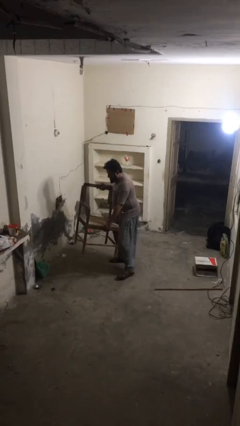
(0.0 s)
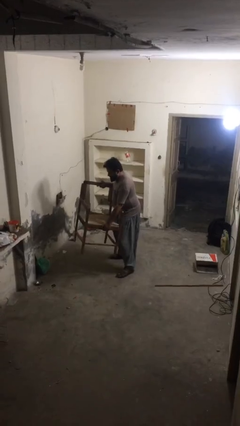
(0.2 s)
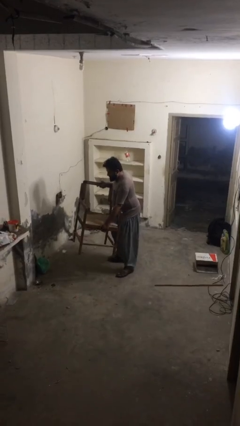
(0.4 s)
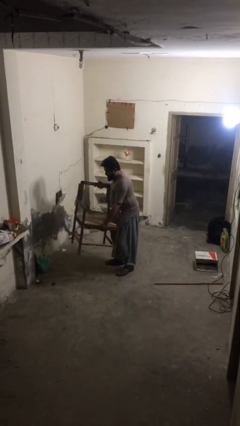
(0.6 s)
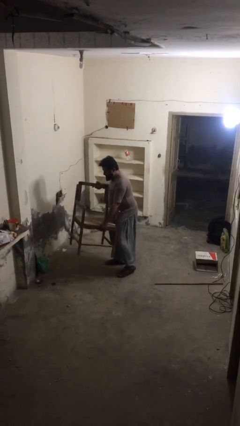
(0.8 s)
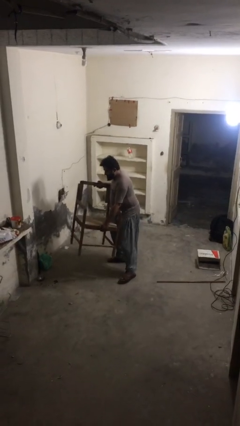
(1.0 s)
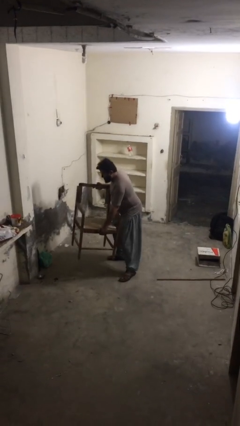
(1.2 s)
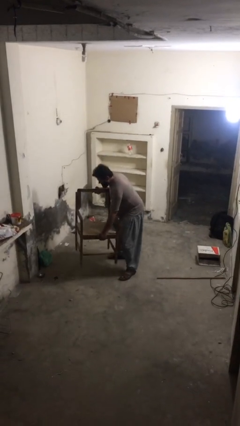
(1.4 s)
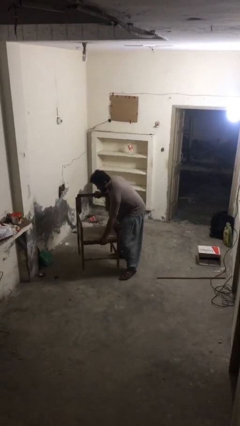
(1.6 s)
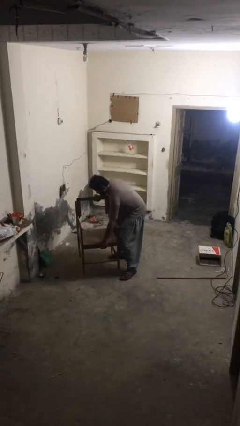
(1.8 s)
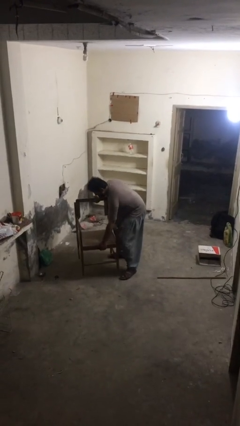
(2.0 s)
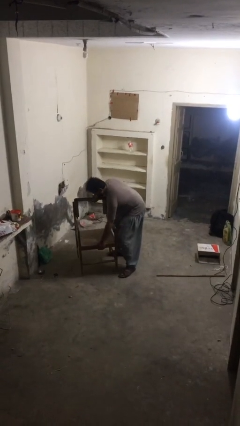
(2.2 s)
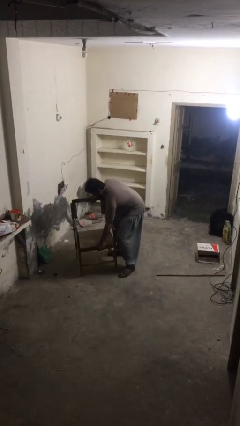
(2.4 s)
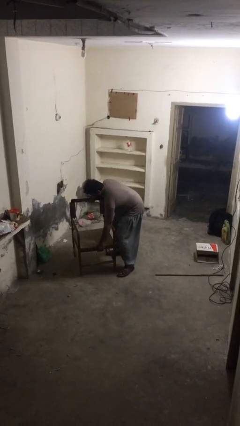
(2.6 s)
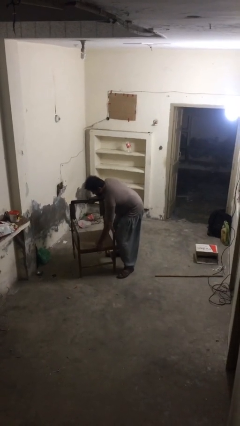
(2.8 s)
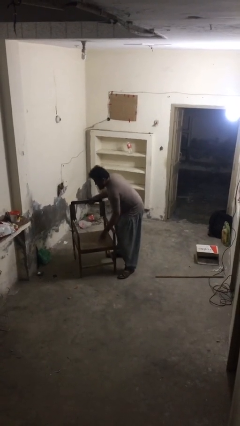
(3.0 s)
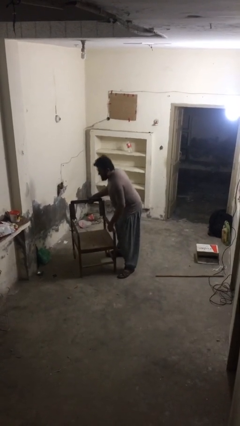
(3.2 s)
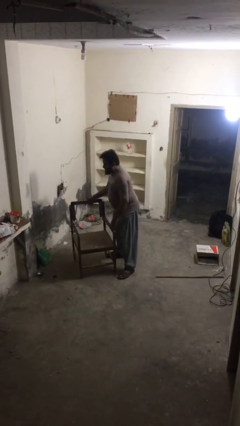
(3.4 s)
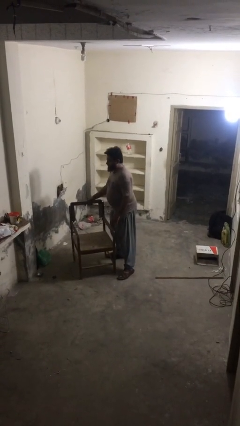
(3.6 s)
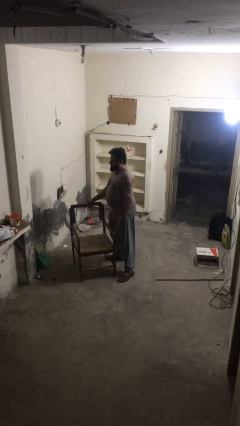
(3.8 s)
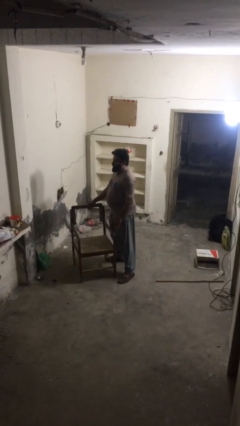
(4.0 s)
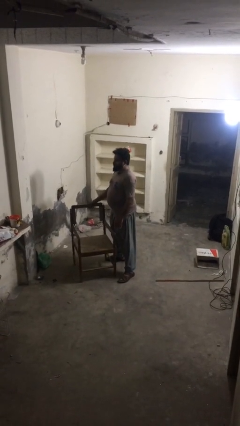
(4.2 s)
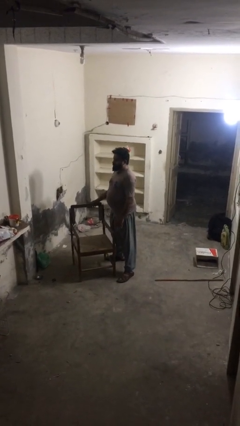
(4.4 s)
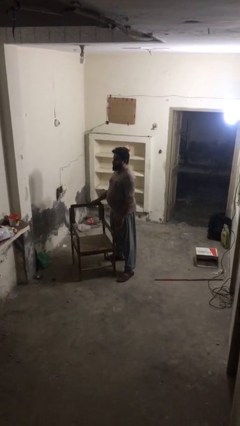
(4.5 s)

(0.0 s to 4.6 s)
person puts down object on floor

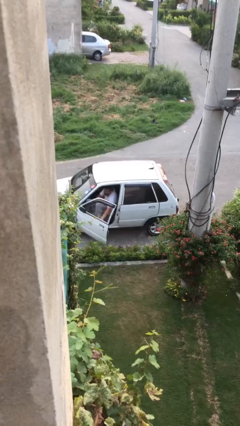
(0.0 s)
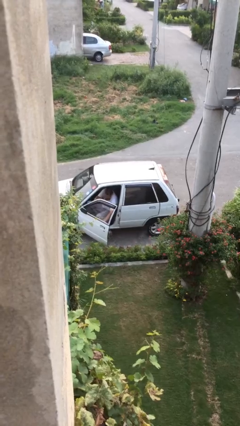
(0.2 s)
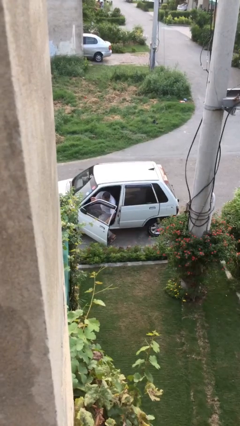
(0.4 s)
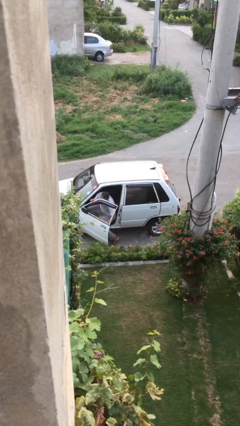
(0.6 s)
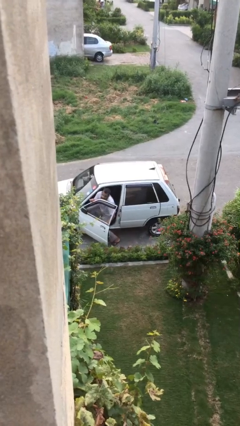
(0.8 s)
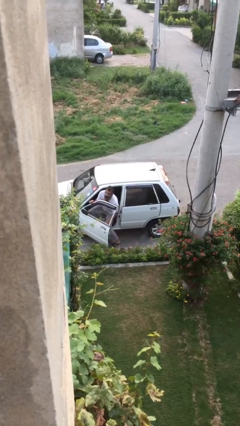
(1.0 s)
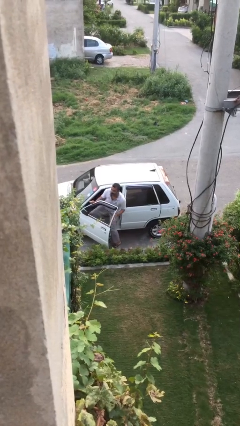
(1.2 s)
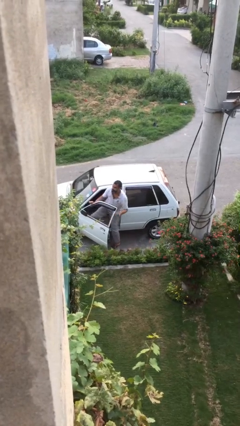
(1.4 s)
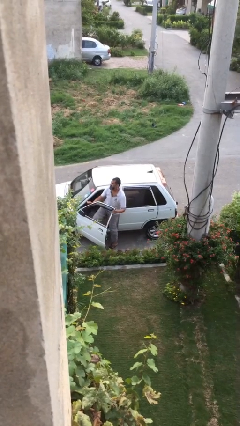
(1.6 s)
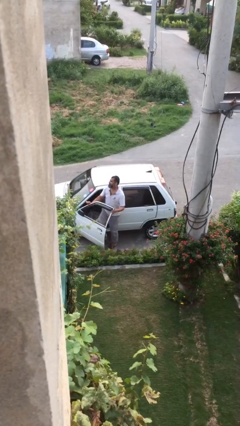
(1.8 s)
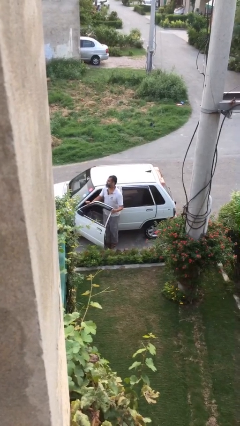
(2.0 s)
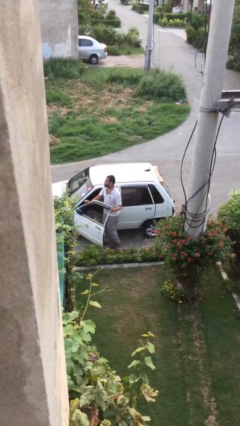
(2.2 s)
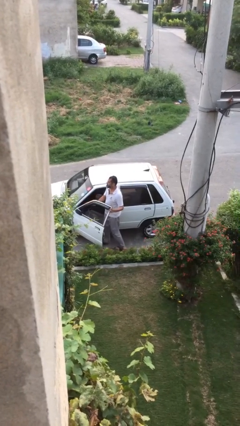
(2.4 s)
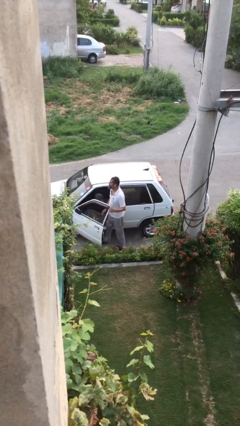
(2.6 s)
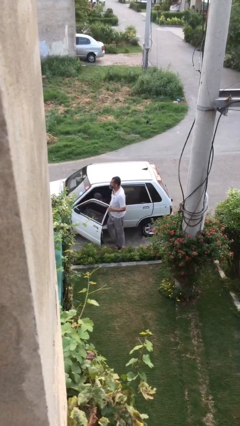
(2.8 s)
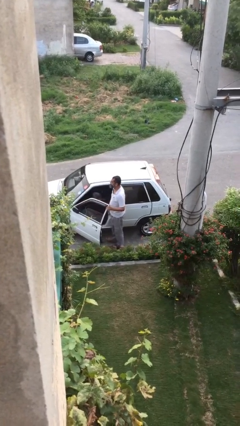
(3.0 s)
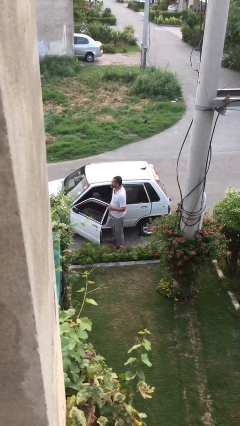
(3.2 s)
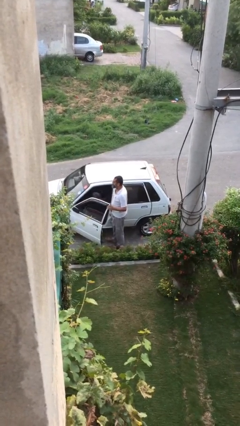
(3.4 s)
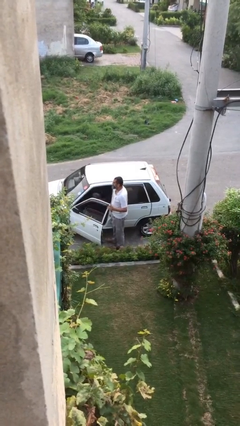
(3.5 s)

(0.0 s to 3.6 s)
person exits car

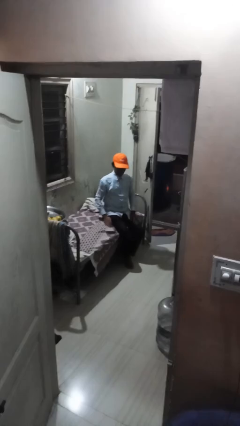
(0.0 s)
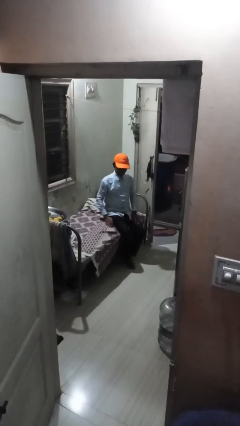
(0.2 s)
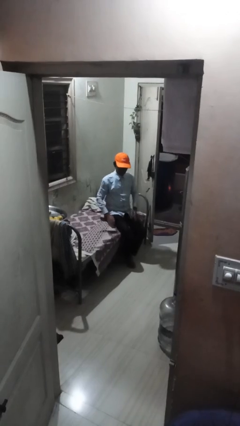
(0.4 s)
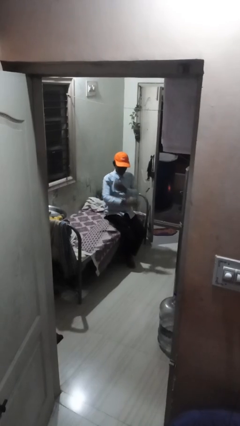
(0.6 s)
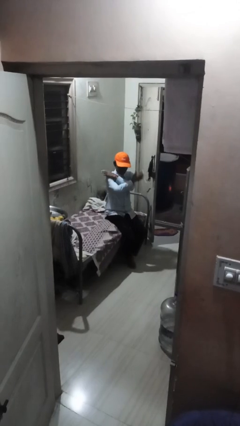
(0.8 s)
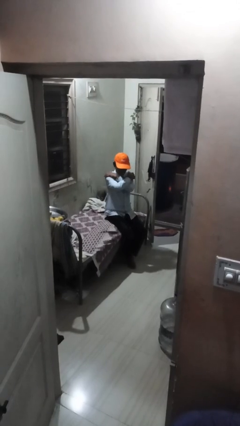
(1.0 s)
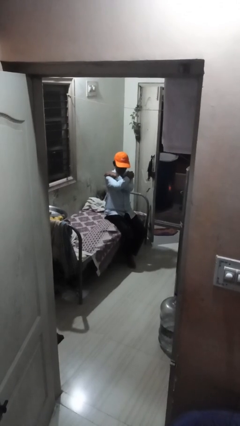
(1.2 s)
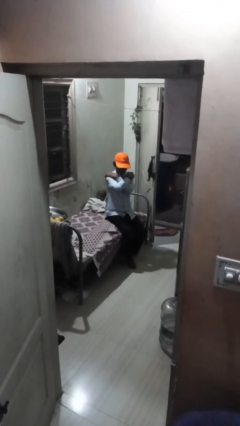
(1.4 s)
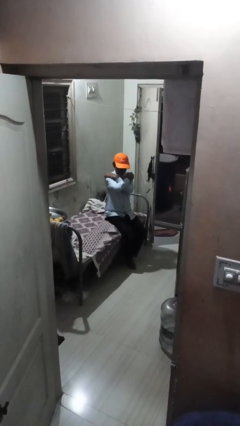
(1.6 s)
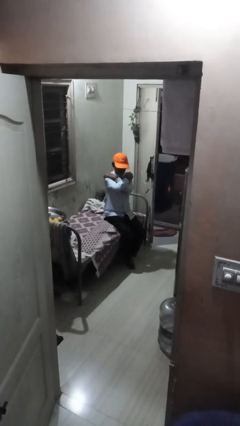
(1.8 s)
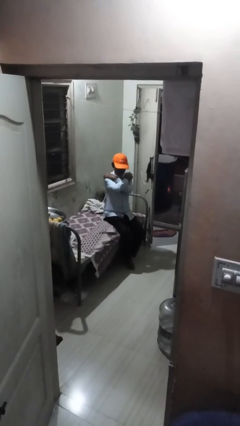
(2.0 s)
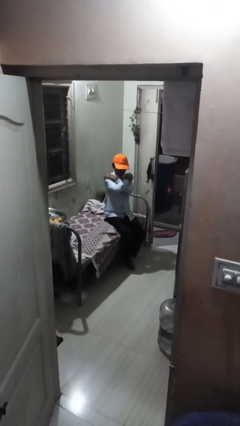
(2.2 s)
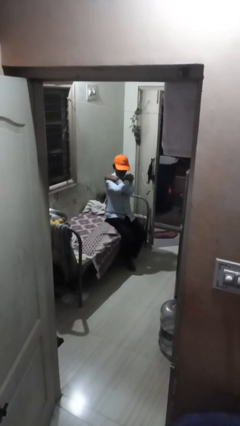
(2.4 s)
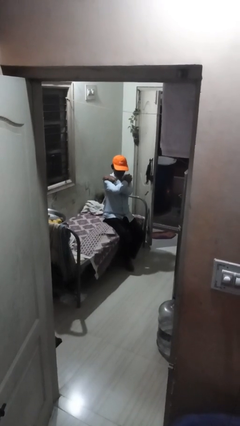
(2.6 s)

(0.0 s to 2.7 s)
person gestures arms x

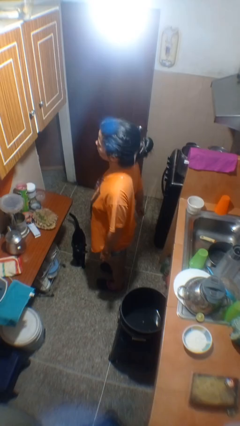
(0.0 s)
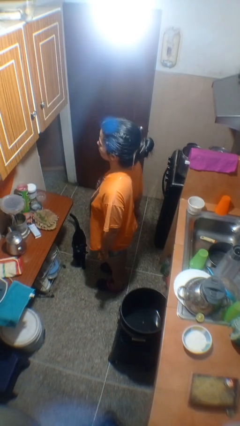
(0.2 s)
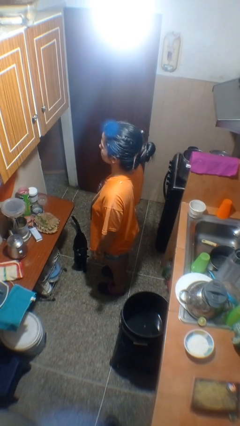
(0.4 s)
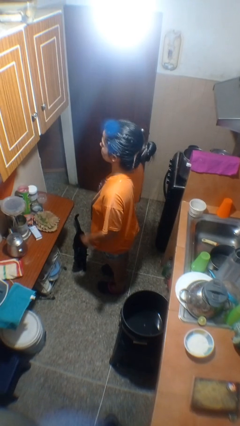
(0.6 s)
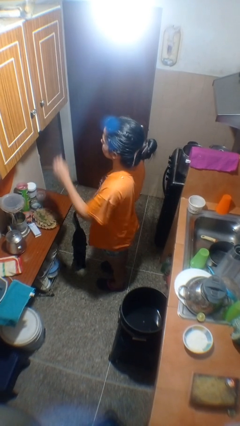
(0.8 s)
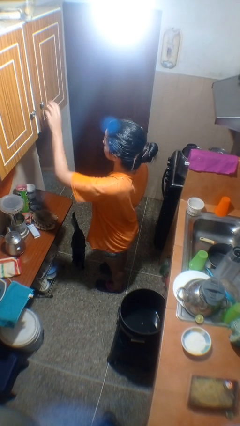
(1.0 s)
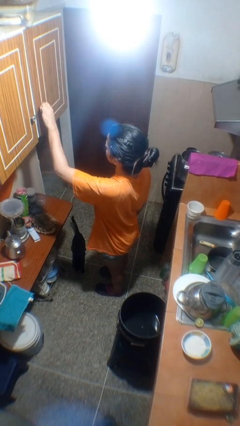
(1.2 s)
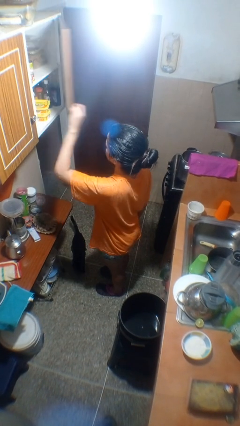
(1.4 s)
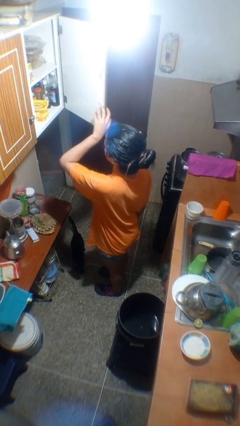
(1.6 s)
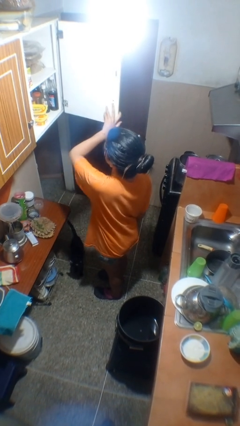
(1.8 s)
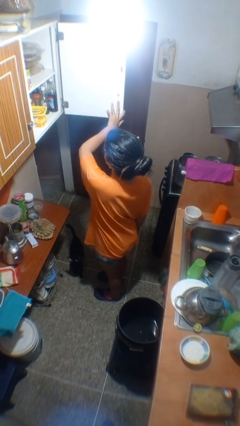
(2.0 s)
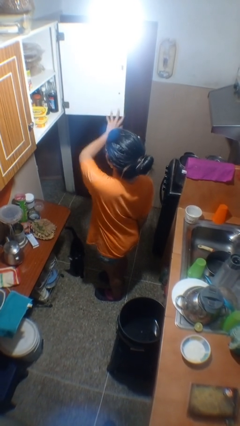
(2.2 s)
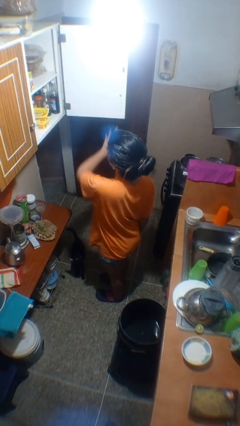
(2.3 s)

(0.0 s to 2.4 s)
person opens cabinet

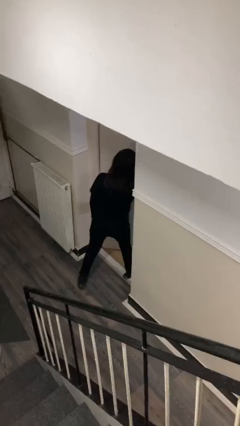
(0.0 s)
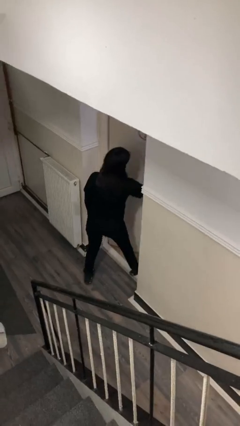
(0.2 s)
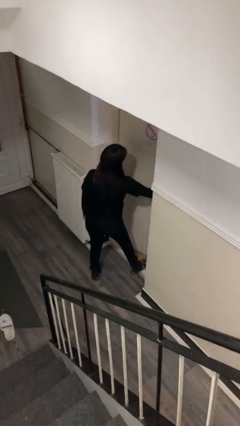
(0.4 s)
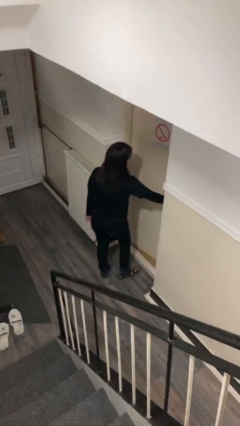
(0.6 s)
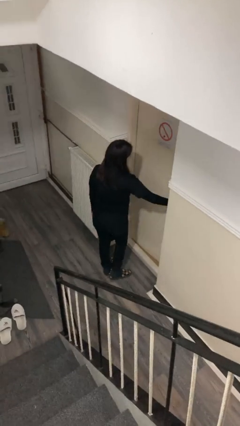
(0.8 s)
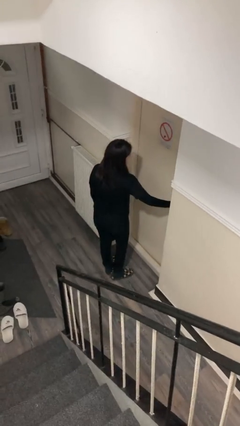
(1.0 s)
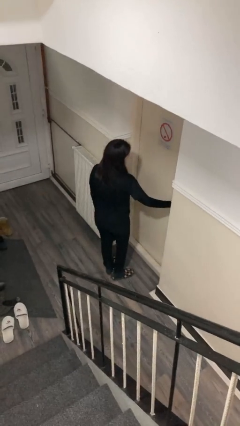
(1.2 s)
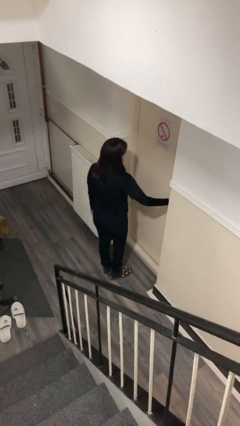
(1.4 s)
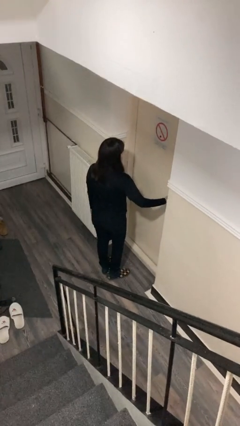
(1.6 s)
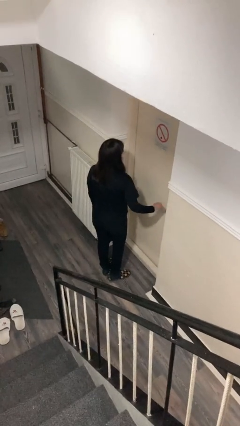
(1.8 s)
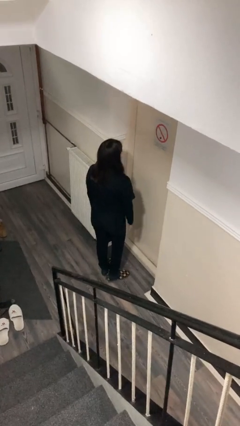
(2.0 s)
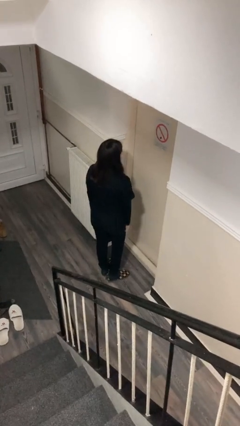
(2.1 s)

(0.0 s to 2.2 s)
person closes facility door

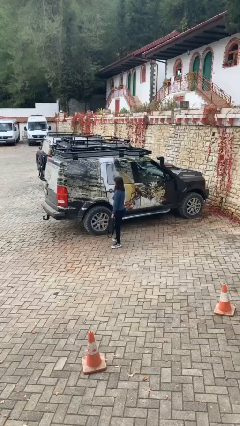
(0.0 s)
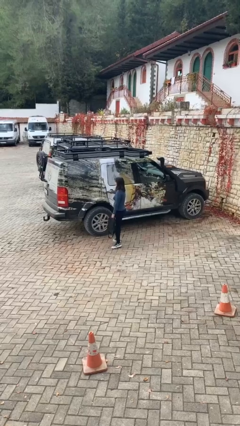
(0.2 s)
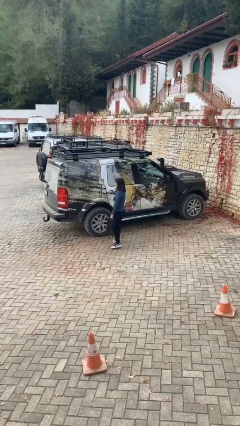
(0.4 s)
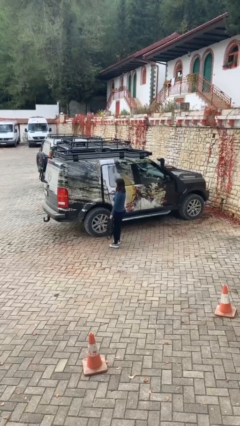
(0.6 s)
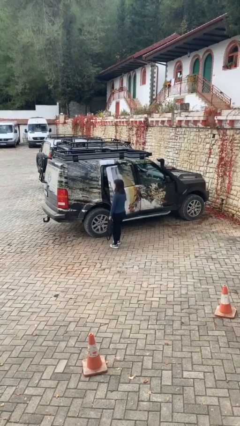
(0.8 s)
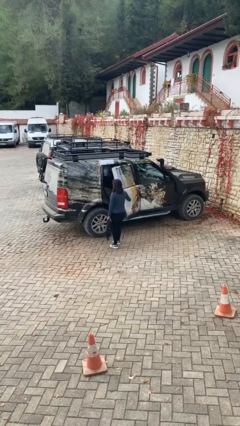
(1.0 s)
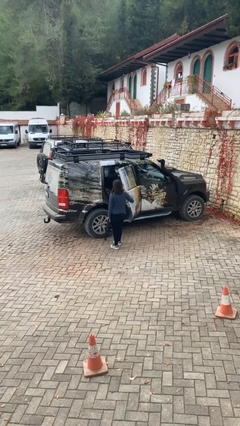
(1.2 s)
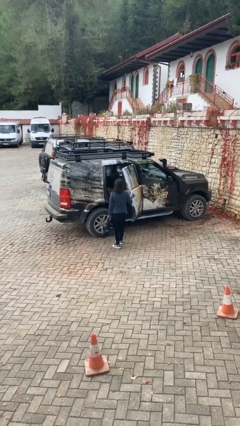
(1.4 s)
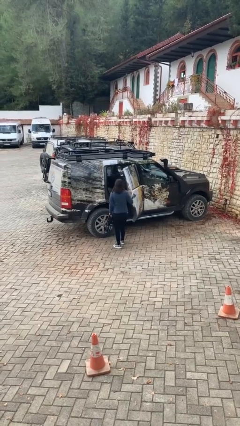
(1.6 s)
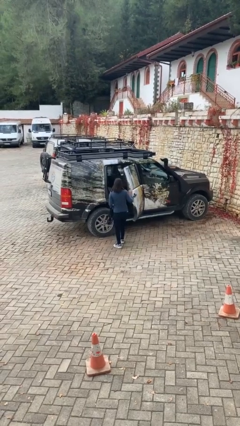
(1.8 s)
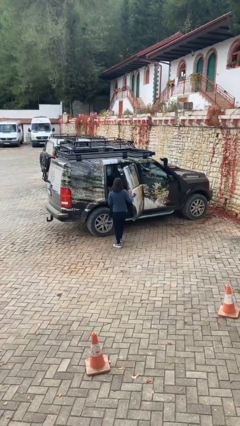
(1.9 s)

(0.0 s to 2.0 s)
person opens car door
